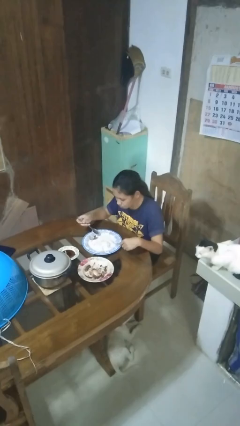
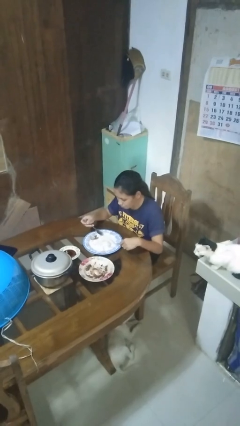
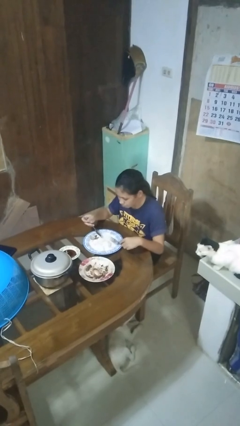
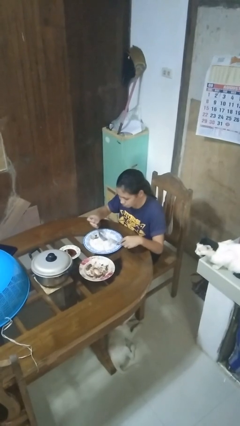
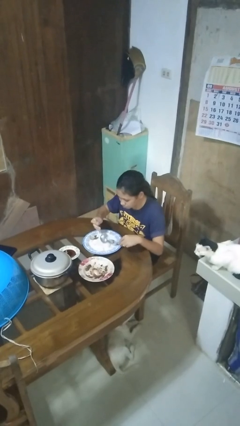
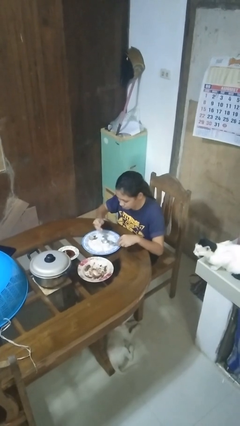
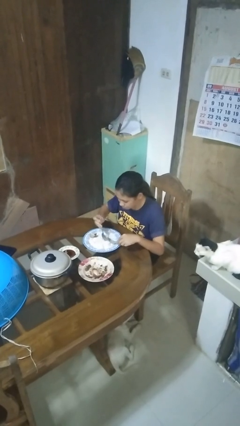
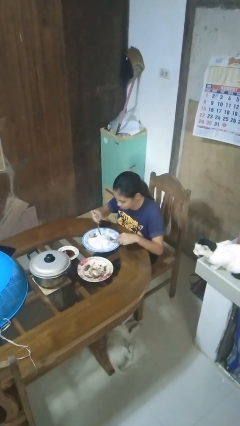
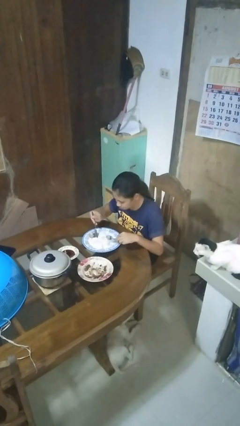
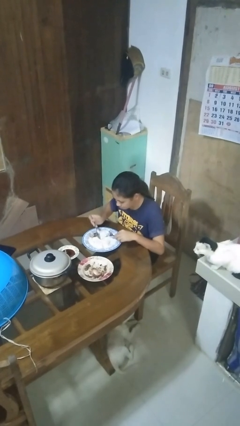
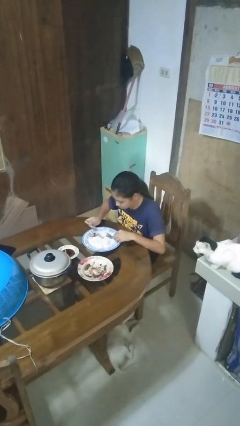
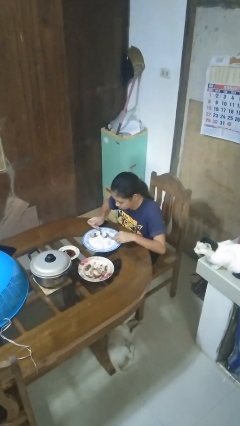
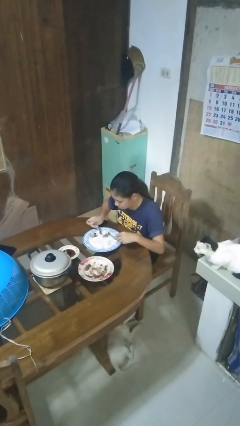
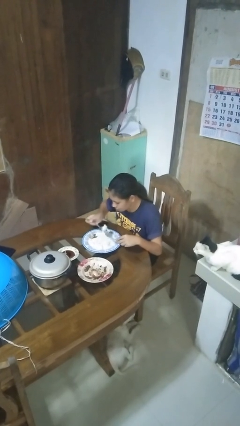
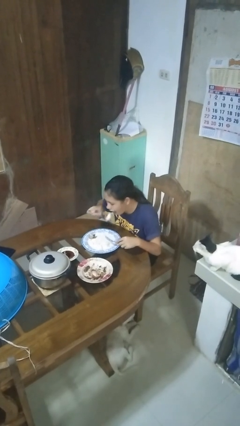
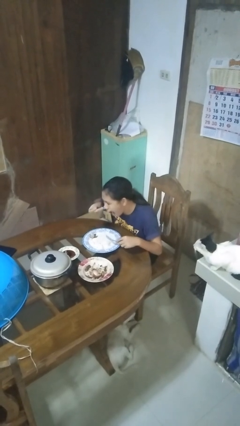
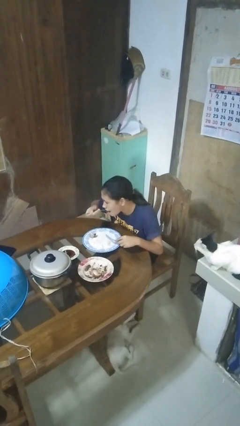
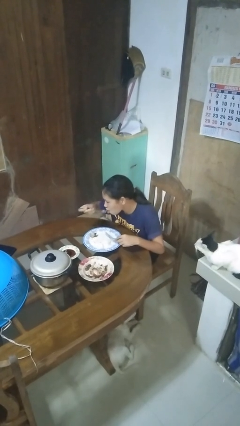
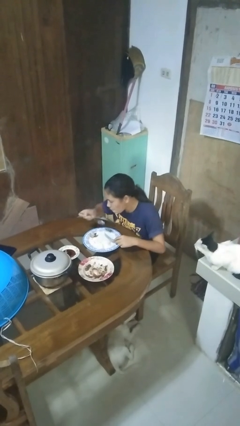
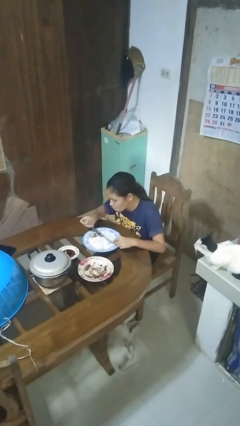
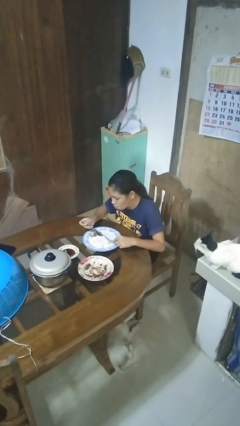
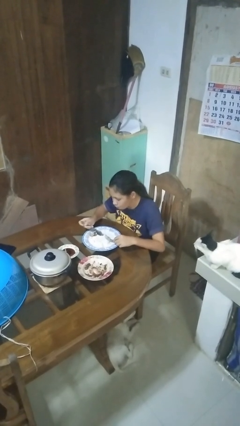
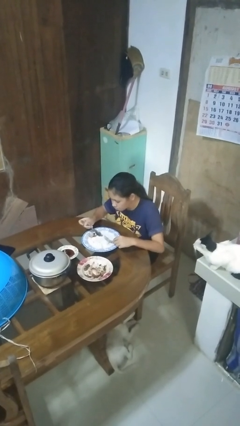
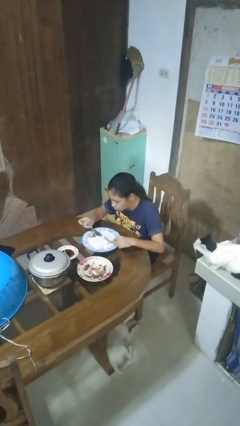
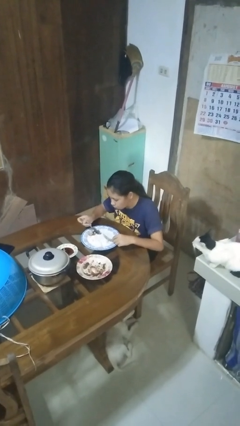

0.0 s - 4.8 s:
person eats with utensil

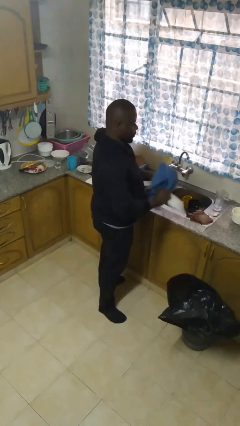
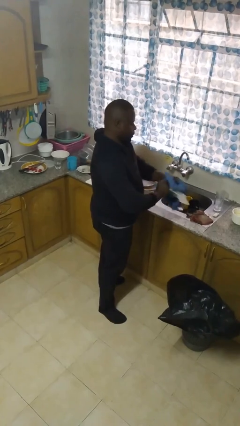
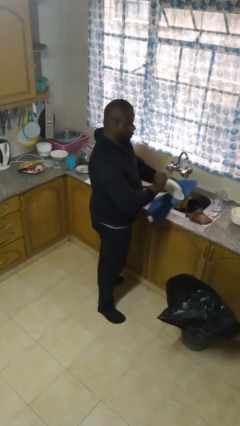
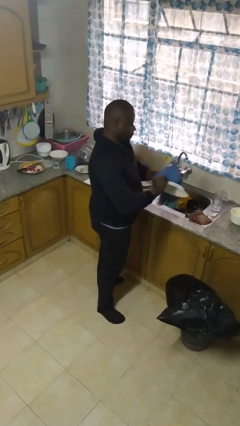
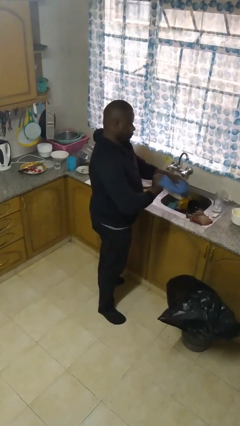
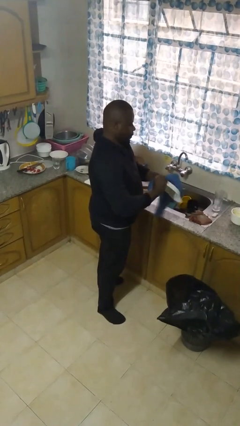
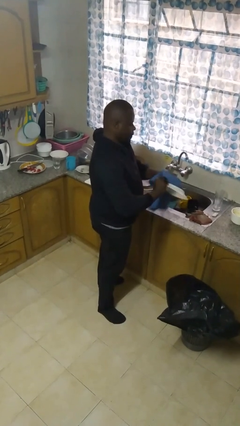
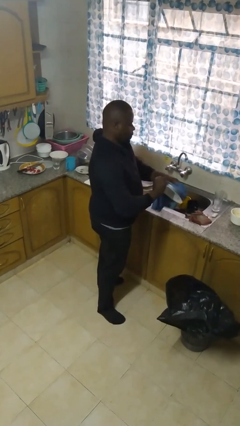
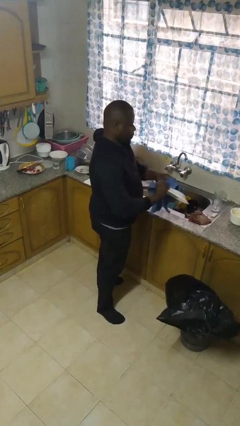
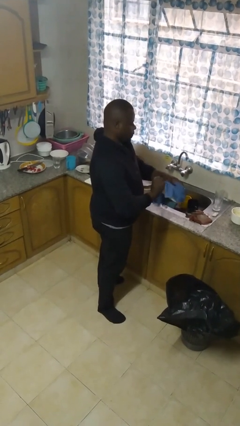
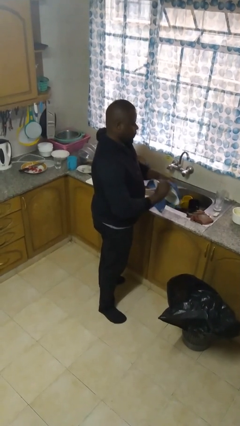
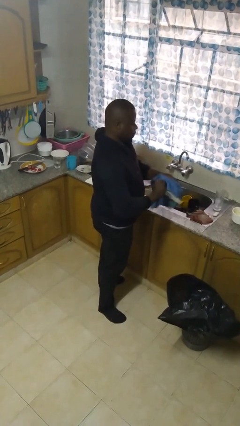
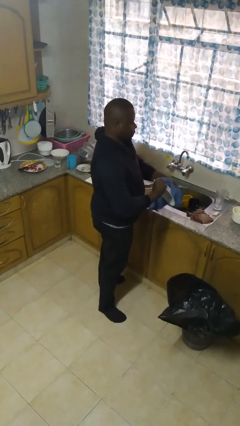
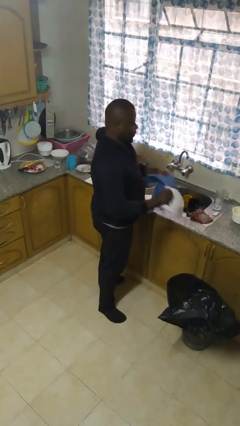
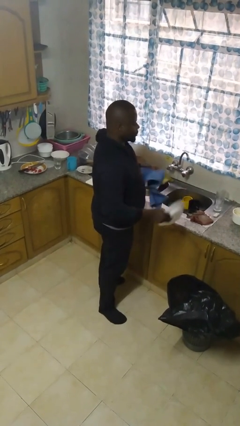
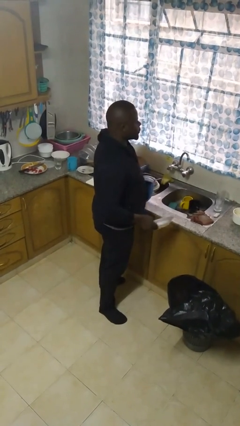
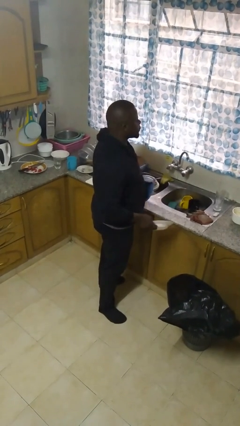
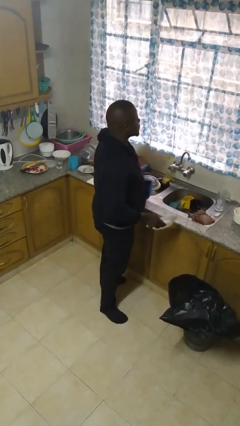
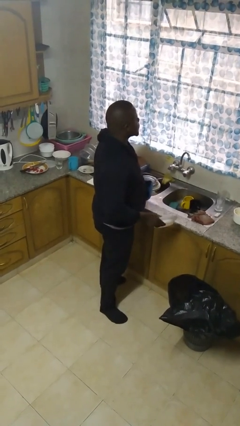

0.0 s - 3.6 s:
person dries dish

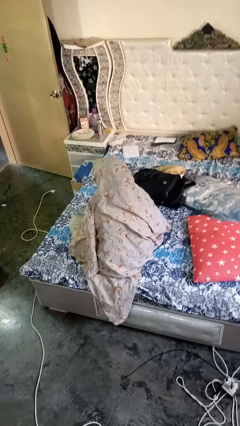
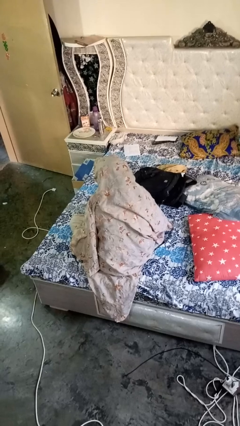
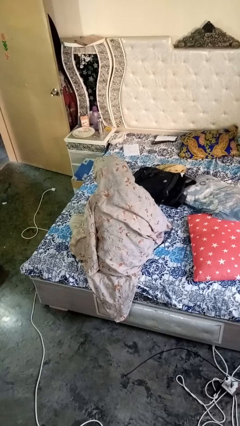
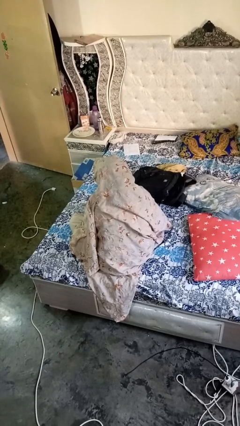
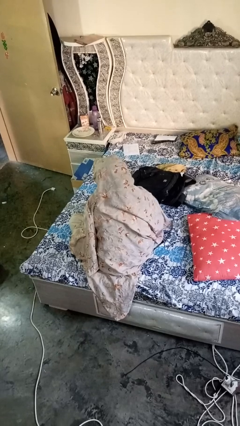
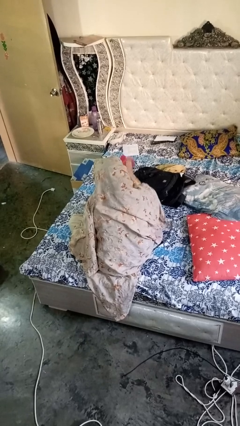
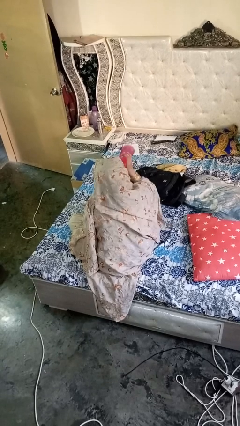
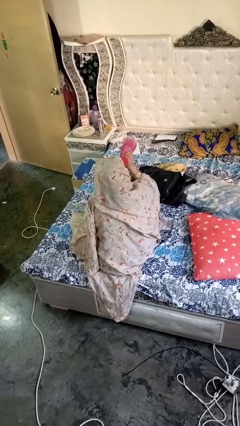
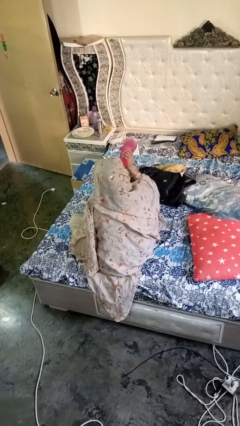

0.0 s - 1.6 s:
person drinks from bottle

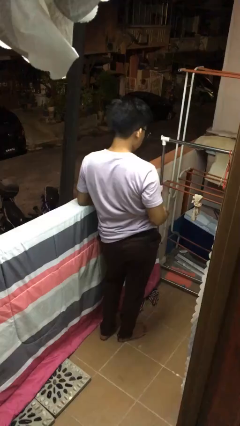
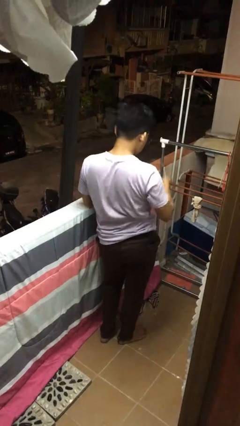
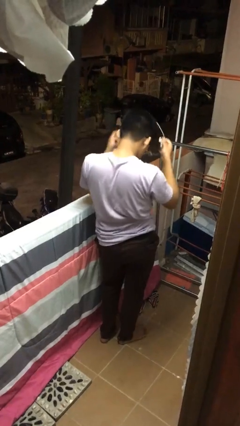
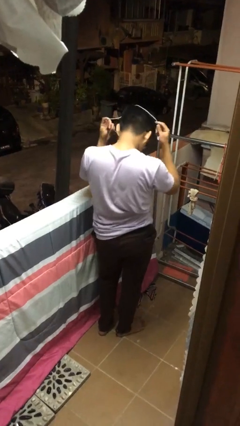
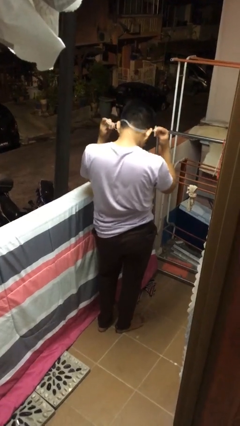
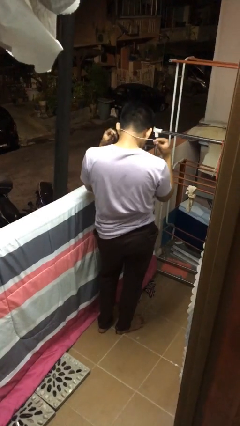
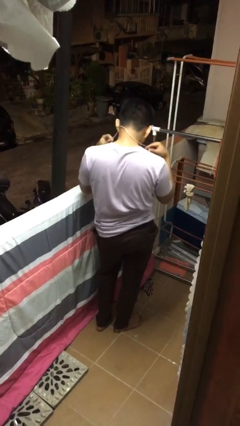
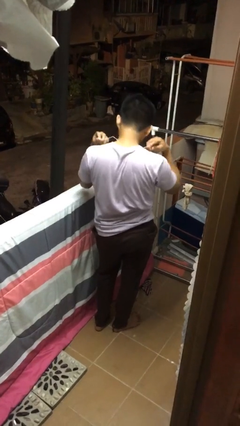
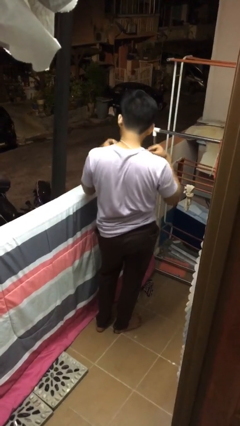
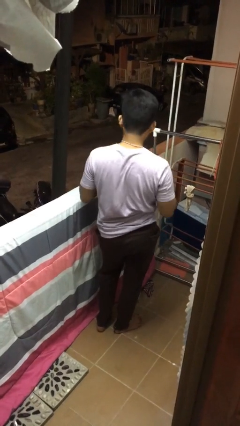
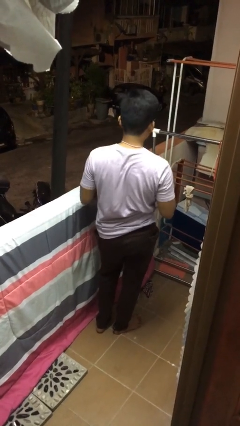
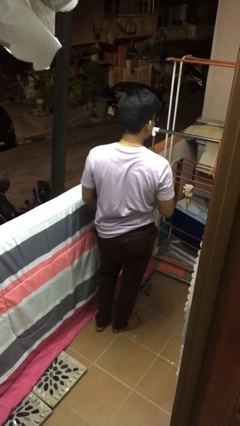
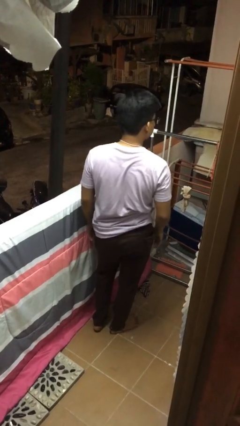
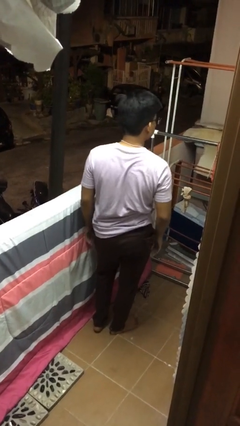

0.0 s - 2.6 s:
person puts on necklace

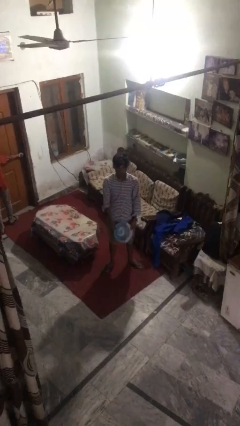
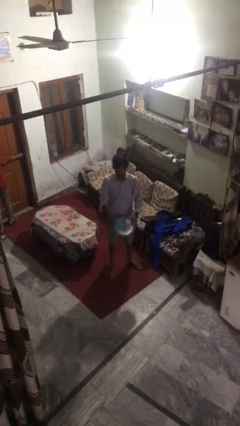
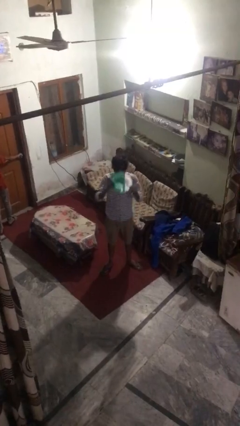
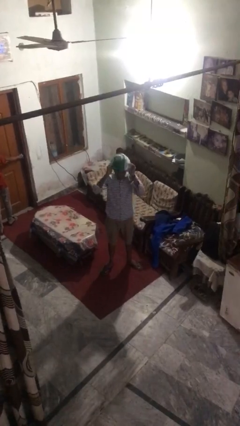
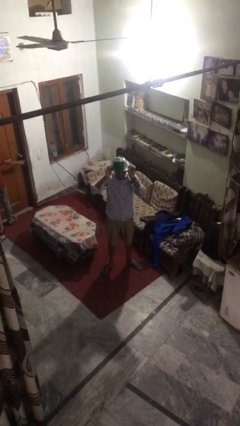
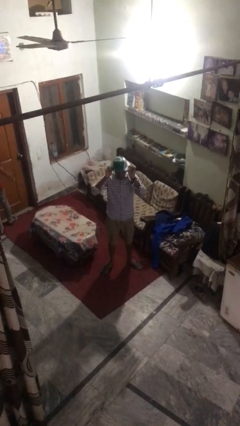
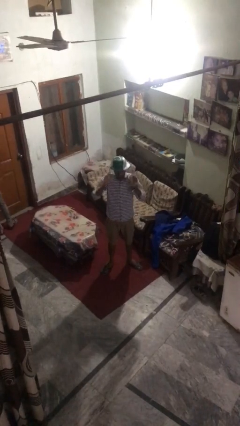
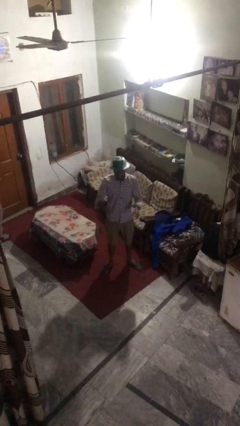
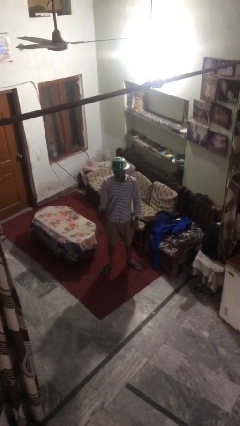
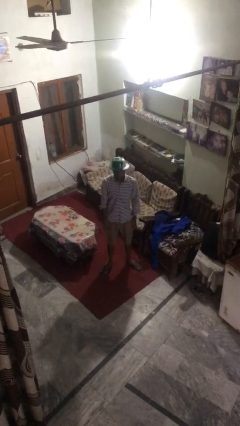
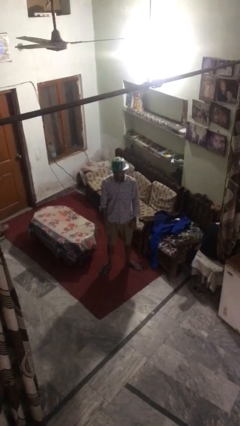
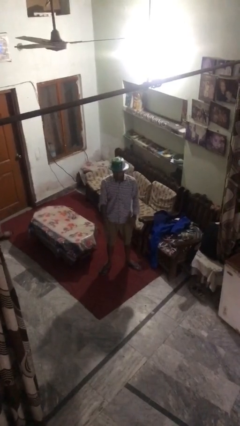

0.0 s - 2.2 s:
person puts on hat

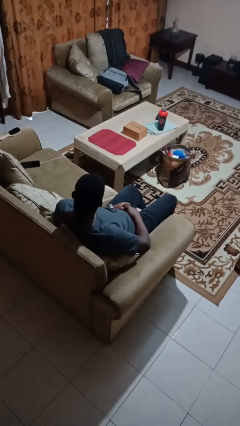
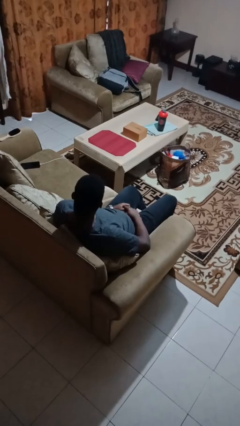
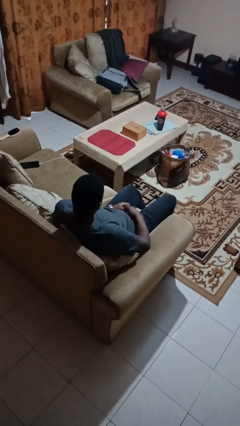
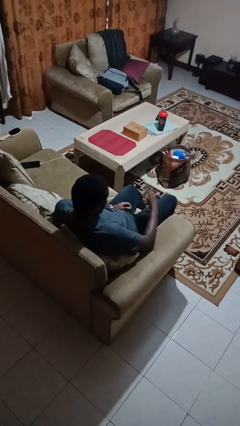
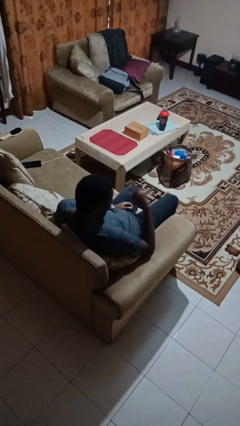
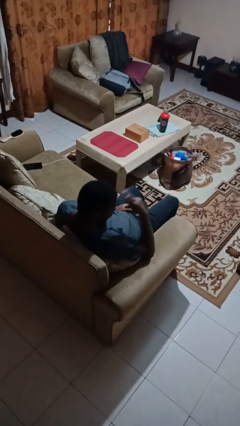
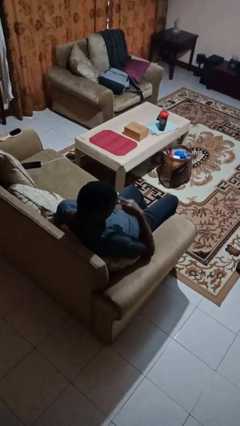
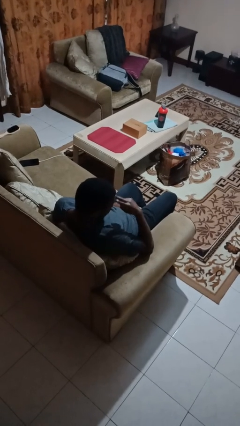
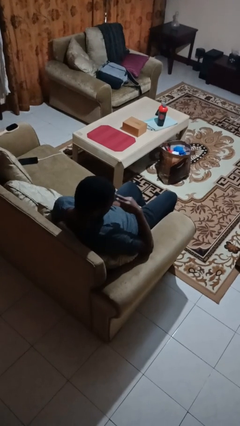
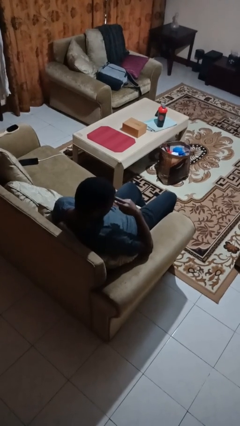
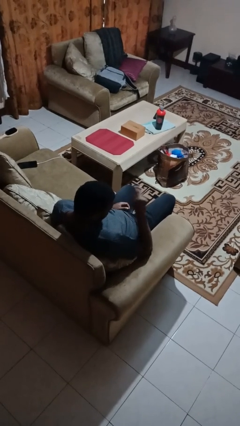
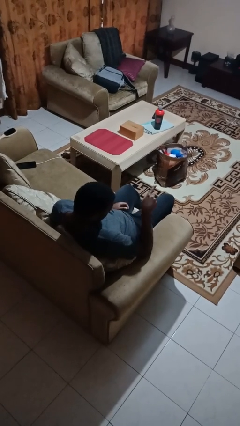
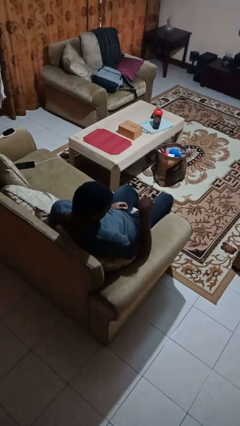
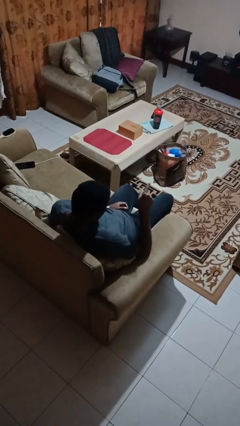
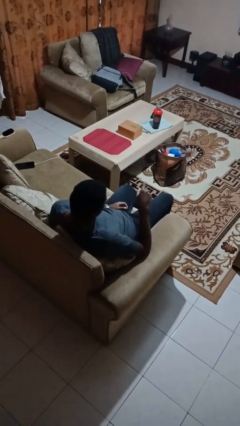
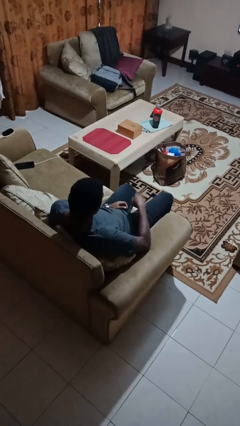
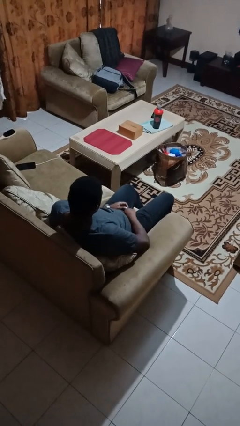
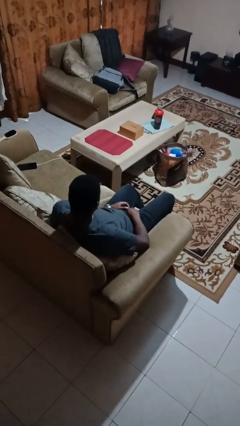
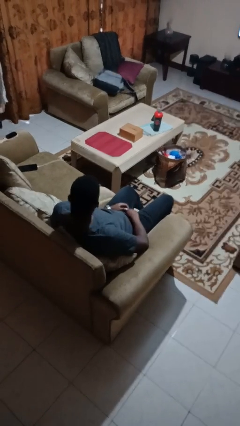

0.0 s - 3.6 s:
person gestures watch closely
